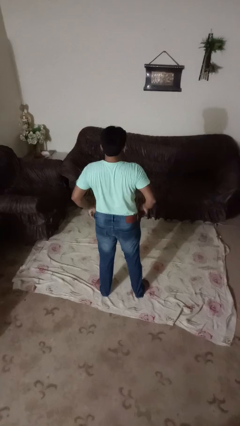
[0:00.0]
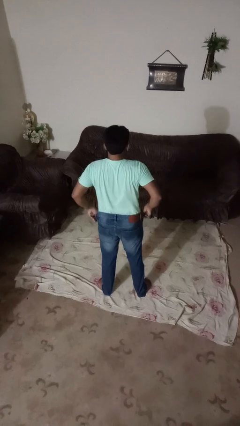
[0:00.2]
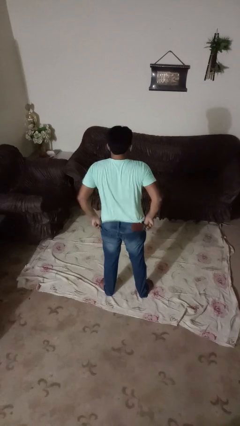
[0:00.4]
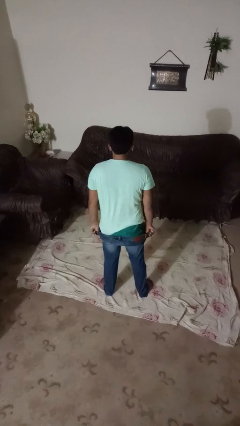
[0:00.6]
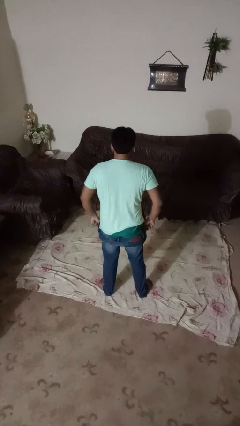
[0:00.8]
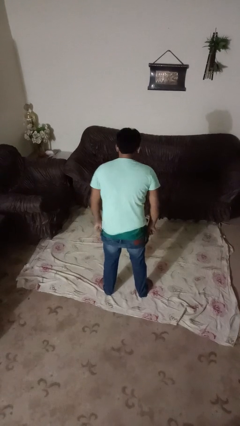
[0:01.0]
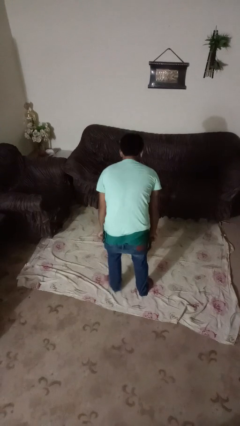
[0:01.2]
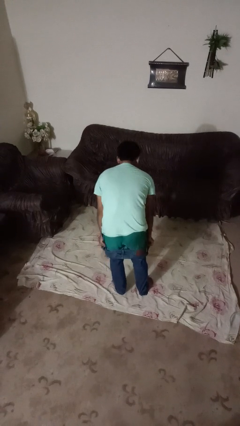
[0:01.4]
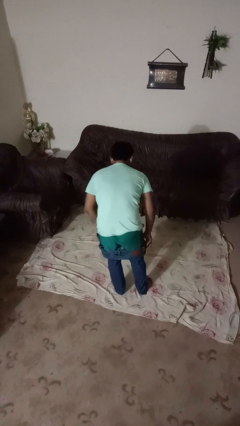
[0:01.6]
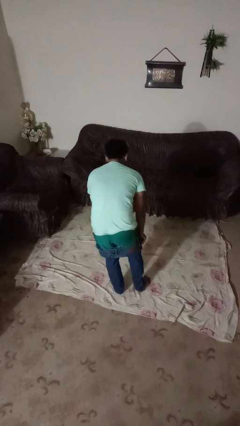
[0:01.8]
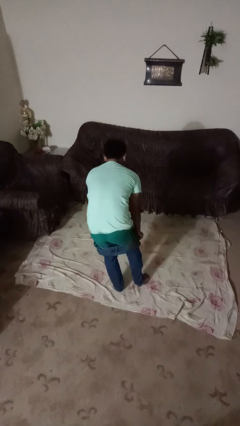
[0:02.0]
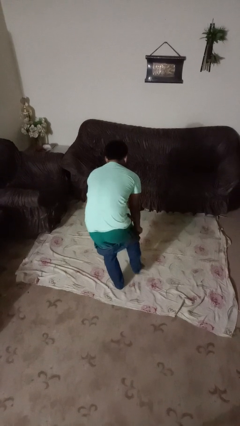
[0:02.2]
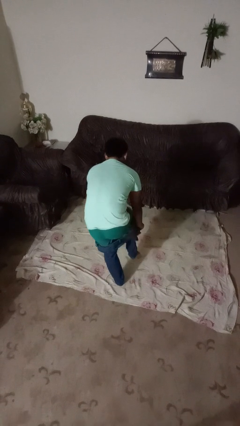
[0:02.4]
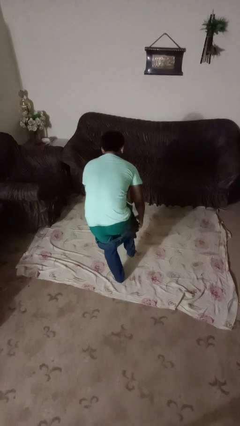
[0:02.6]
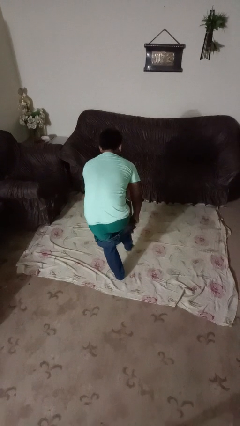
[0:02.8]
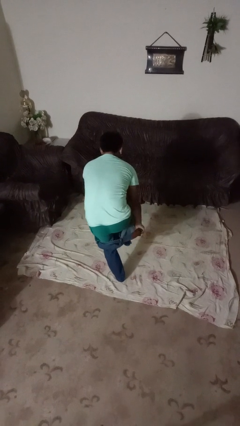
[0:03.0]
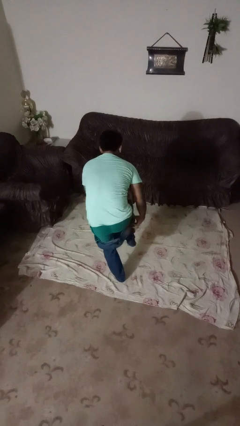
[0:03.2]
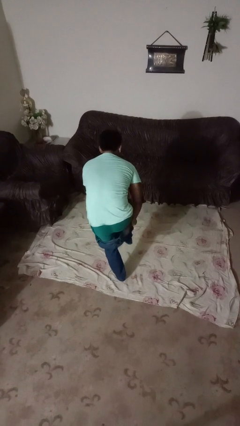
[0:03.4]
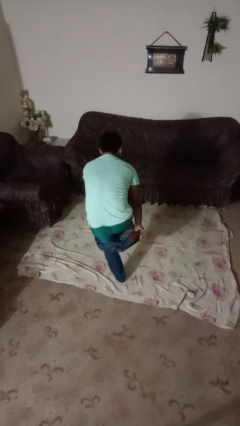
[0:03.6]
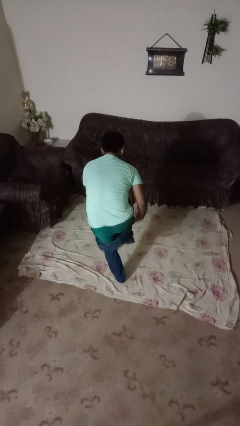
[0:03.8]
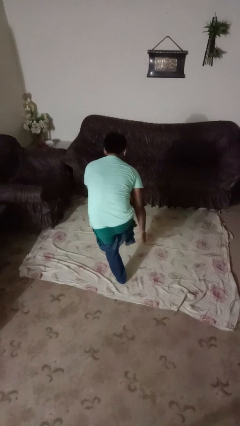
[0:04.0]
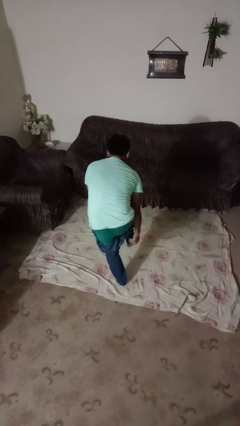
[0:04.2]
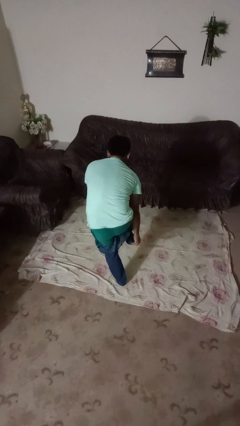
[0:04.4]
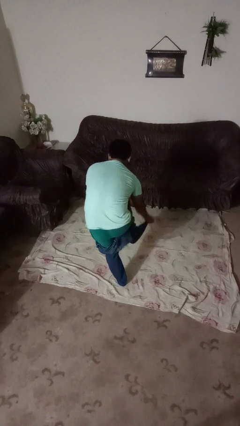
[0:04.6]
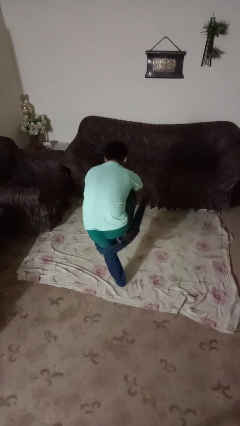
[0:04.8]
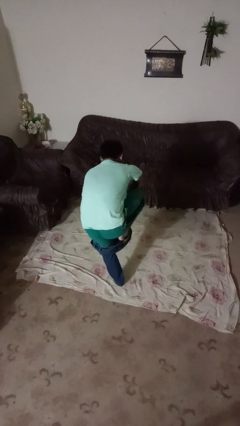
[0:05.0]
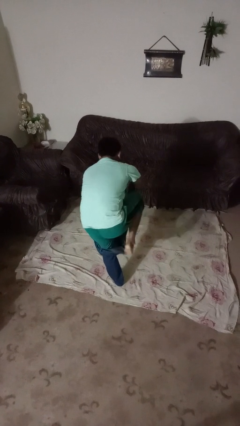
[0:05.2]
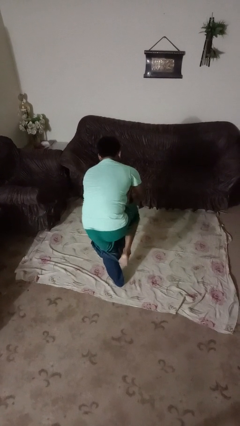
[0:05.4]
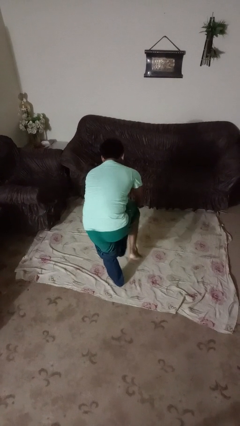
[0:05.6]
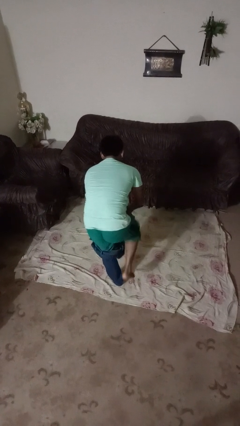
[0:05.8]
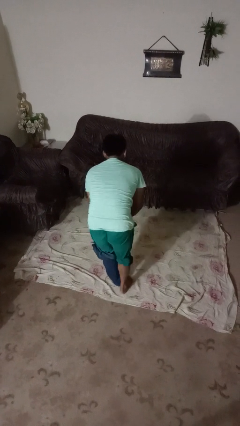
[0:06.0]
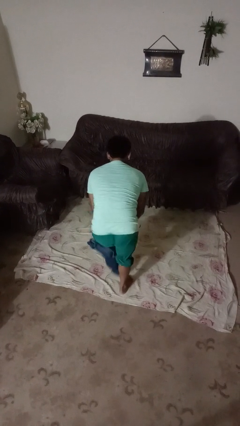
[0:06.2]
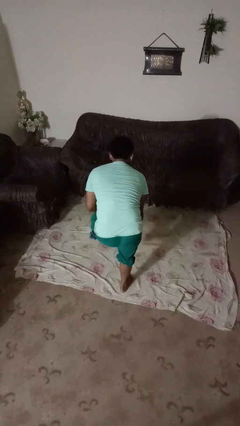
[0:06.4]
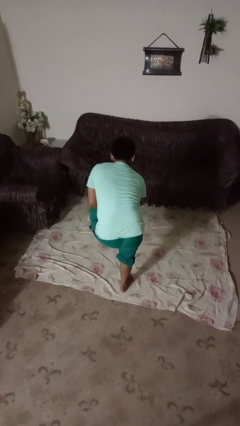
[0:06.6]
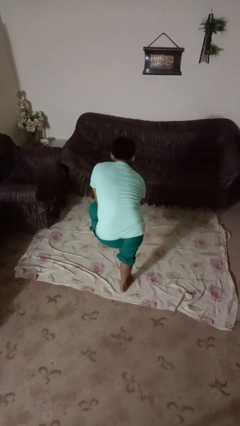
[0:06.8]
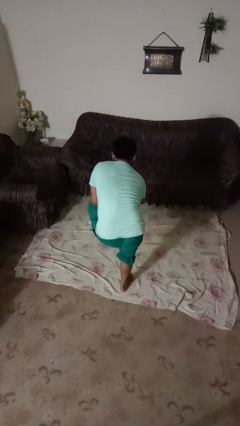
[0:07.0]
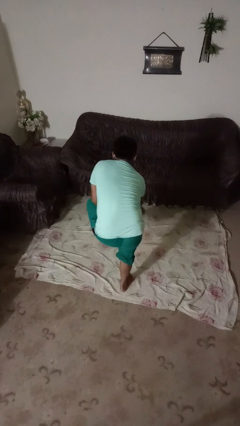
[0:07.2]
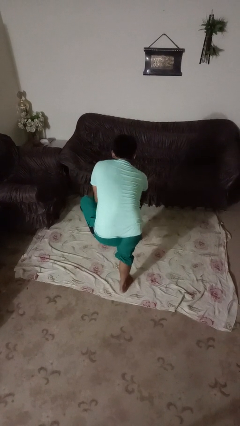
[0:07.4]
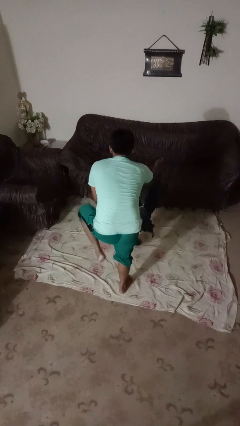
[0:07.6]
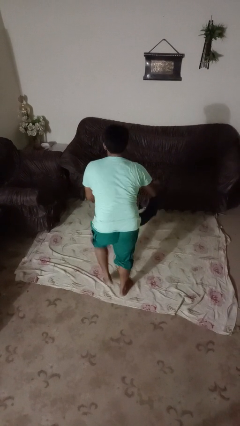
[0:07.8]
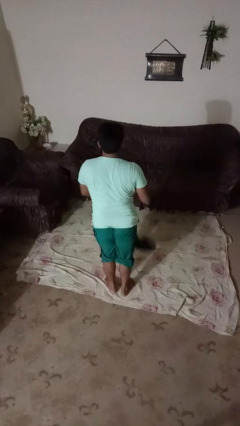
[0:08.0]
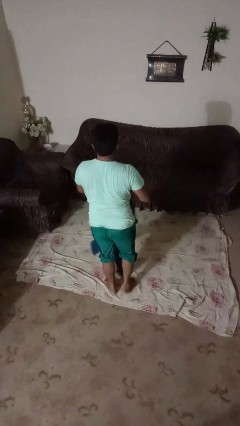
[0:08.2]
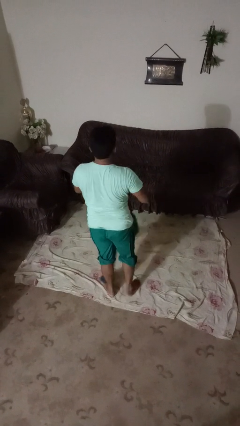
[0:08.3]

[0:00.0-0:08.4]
person takes off pants

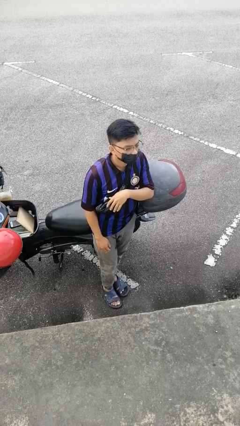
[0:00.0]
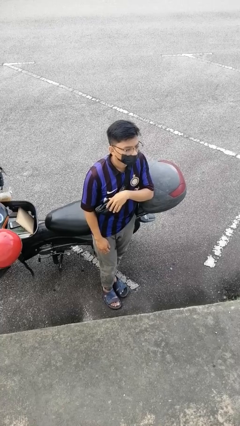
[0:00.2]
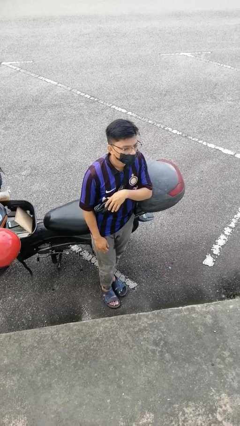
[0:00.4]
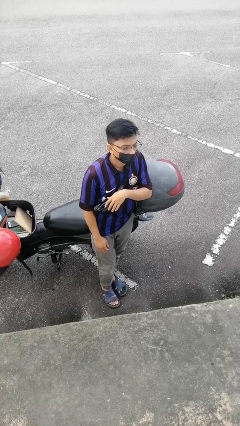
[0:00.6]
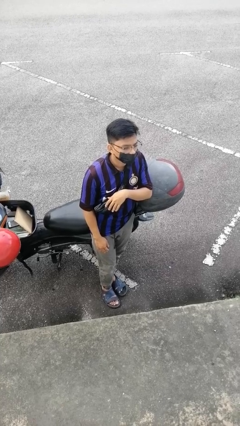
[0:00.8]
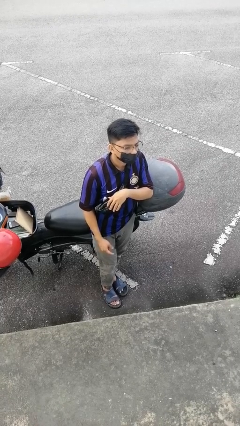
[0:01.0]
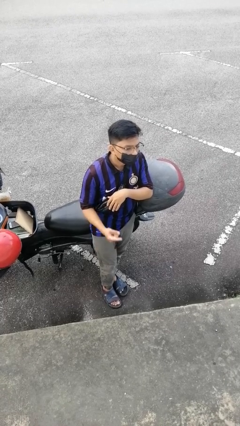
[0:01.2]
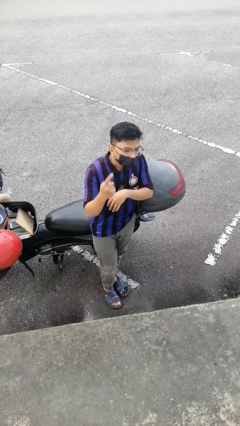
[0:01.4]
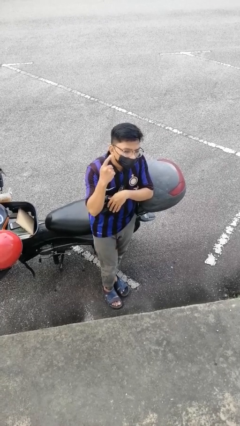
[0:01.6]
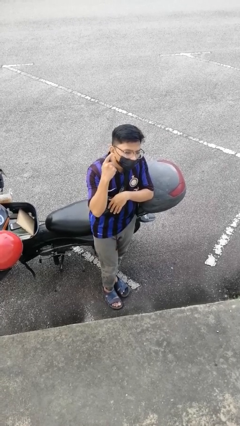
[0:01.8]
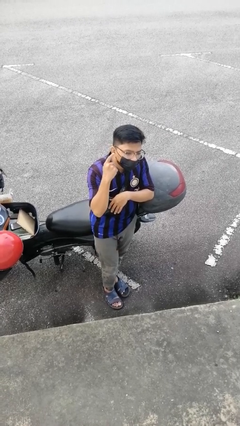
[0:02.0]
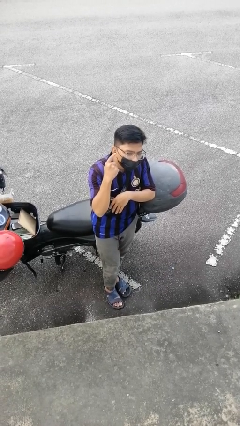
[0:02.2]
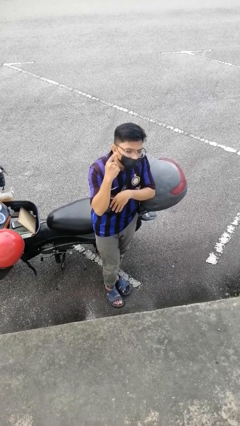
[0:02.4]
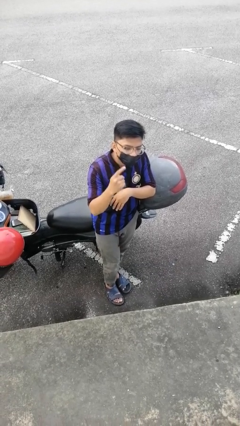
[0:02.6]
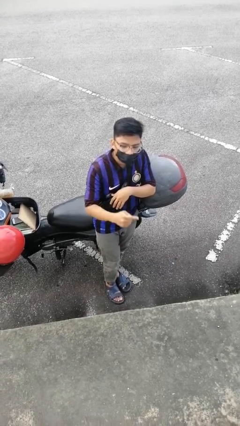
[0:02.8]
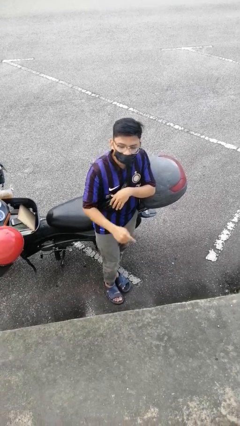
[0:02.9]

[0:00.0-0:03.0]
person gestures listen closely

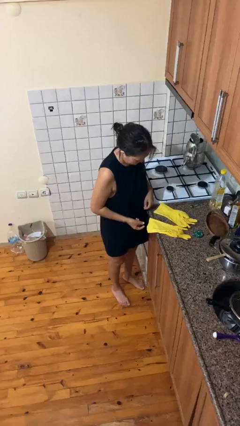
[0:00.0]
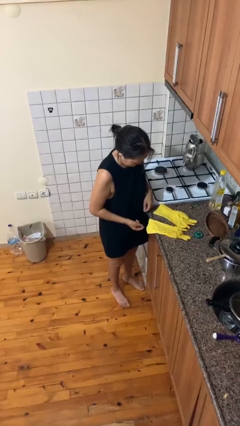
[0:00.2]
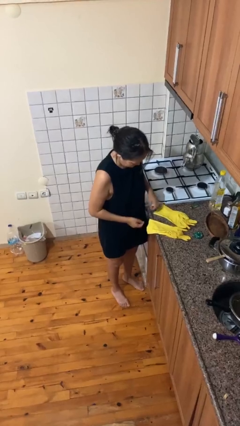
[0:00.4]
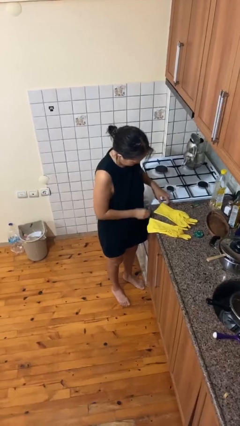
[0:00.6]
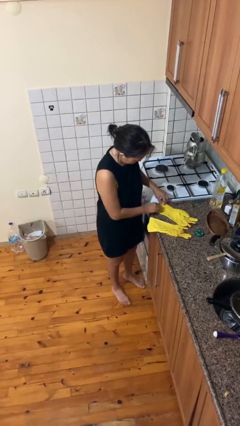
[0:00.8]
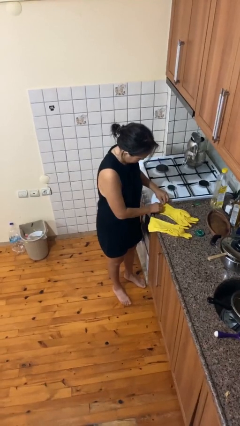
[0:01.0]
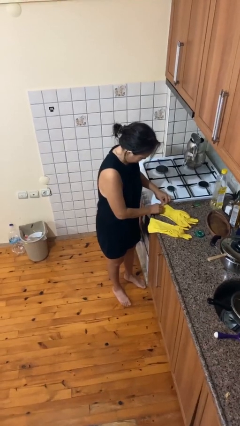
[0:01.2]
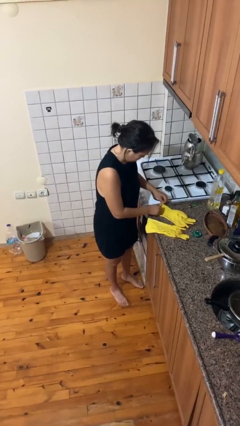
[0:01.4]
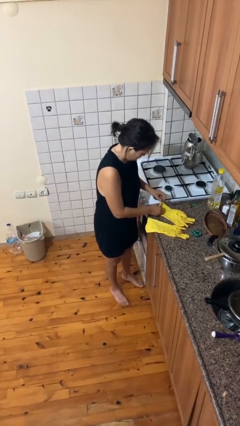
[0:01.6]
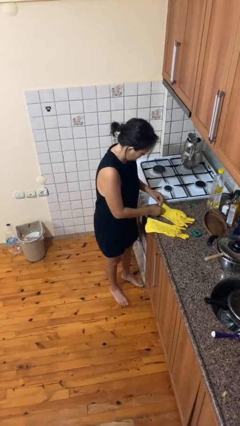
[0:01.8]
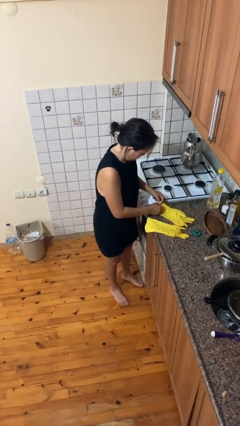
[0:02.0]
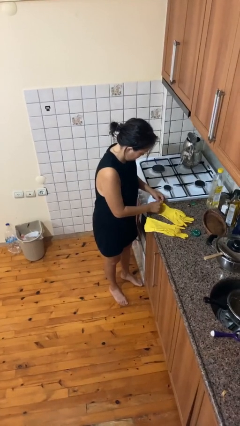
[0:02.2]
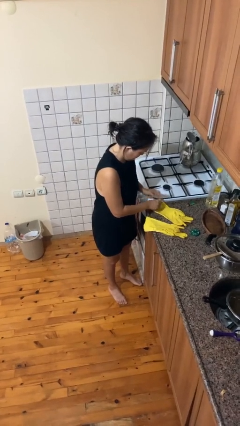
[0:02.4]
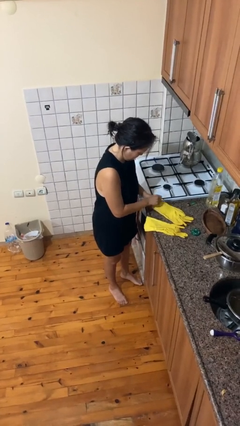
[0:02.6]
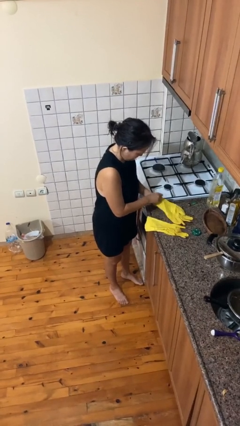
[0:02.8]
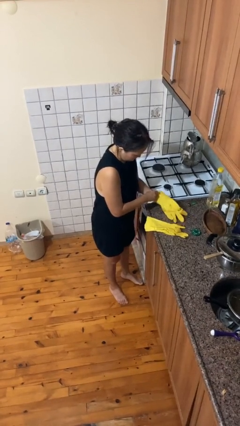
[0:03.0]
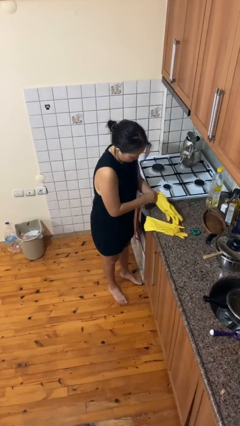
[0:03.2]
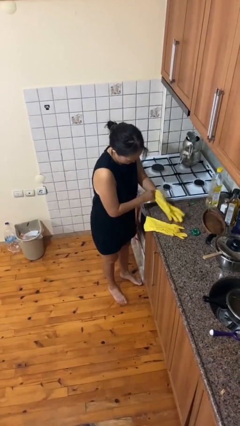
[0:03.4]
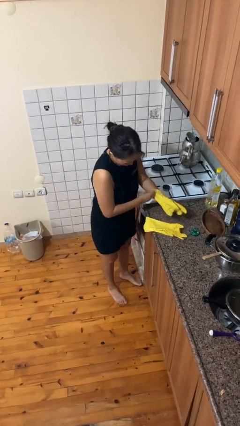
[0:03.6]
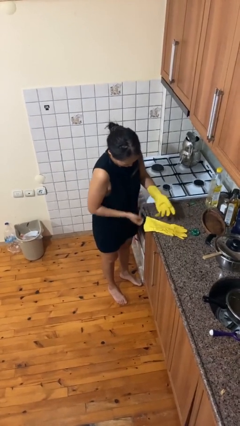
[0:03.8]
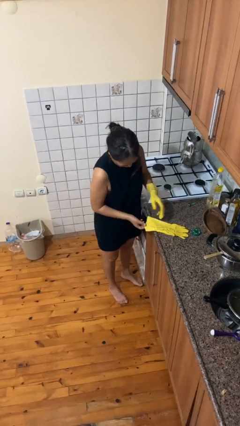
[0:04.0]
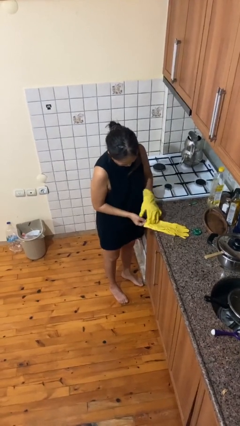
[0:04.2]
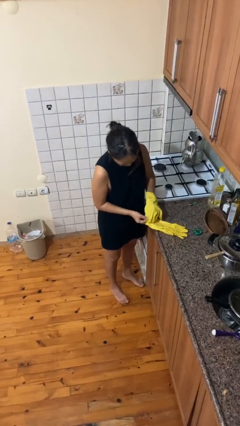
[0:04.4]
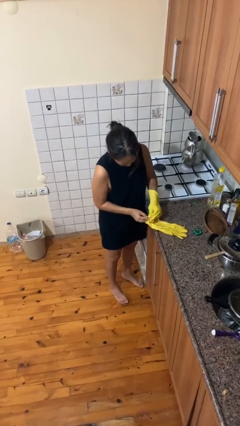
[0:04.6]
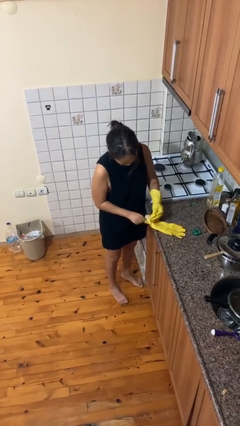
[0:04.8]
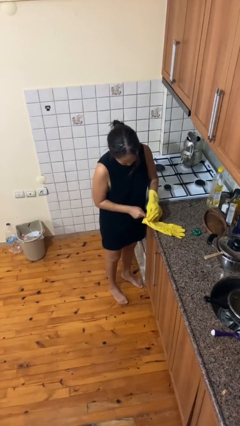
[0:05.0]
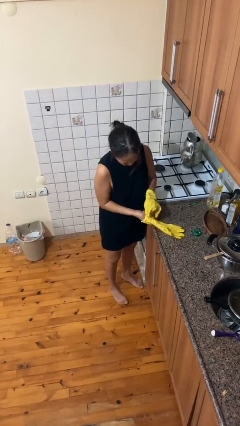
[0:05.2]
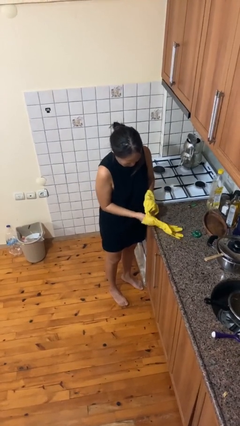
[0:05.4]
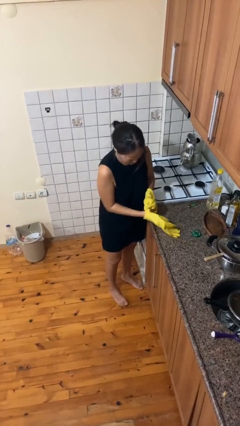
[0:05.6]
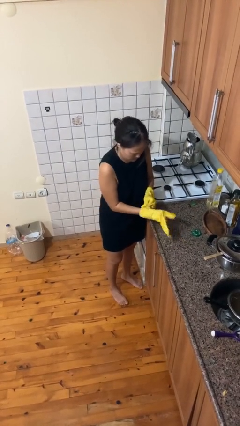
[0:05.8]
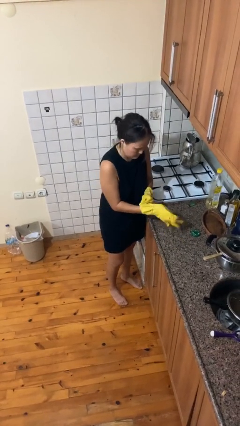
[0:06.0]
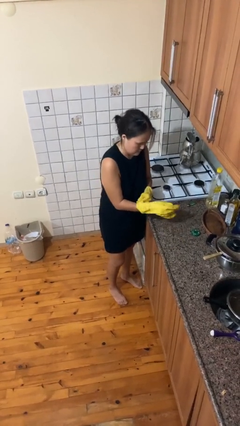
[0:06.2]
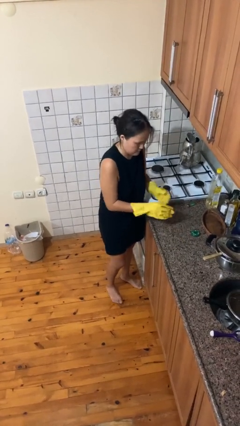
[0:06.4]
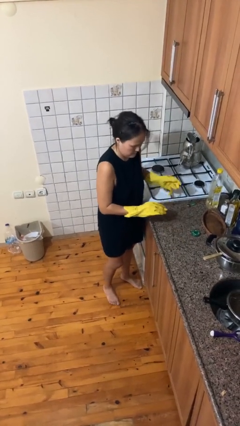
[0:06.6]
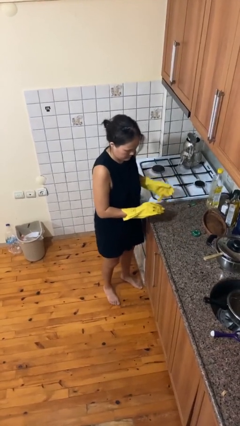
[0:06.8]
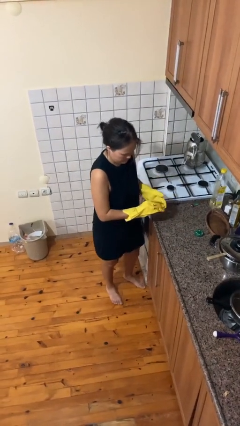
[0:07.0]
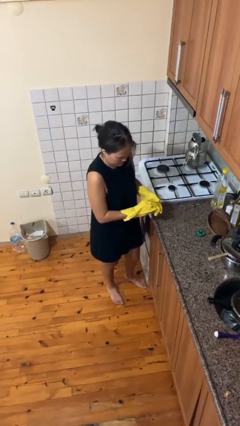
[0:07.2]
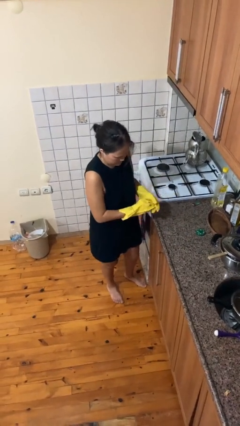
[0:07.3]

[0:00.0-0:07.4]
person puts on gloves
